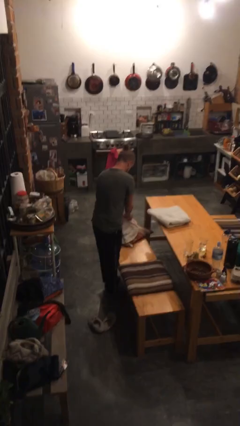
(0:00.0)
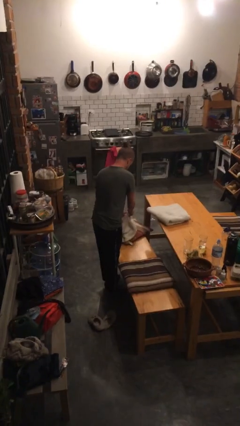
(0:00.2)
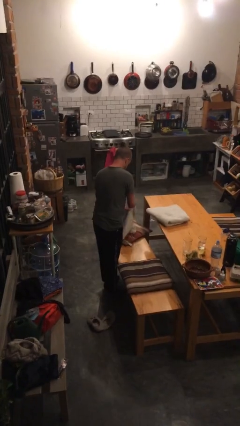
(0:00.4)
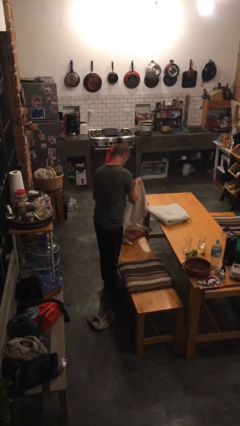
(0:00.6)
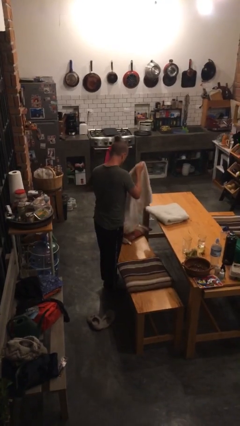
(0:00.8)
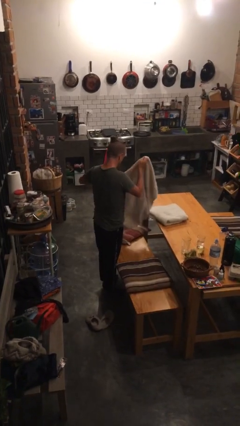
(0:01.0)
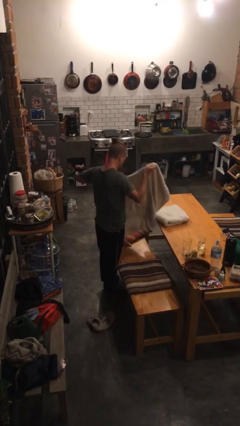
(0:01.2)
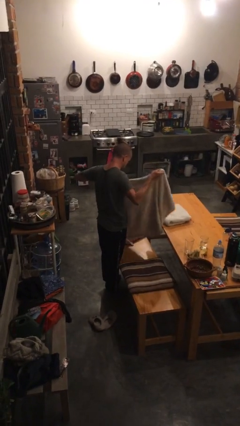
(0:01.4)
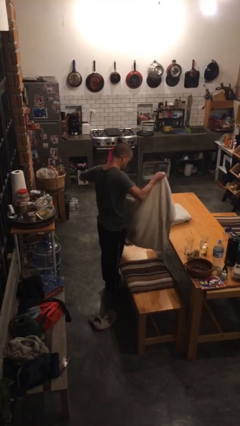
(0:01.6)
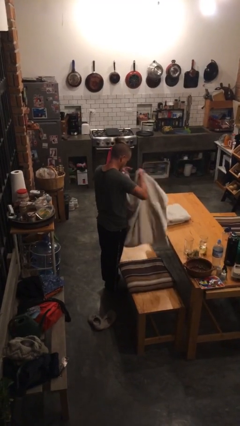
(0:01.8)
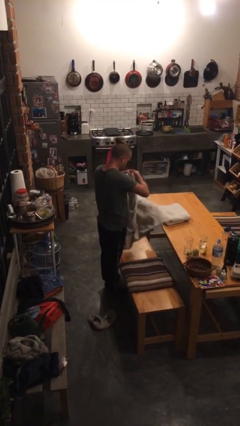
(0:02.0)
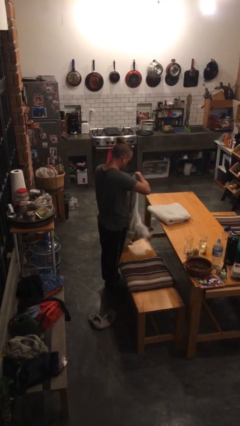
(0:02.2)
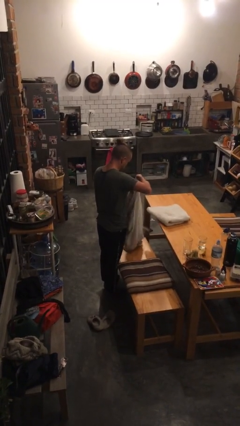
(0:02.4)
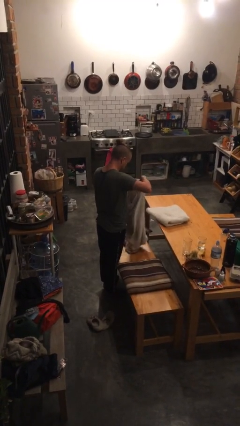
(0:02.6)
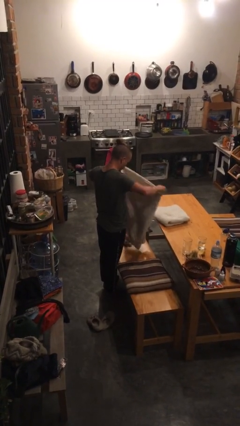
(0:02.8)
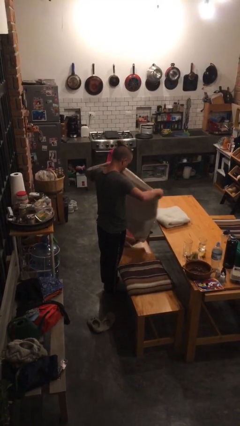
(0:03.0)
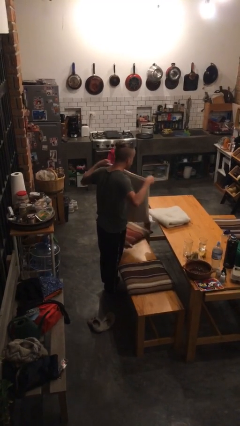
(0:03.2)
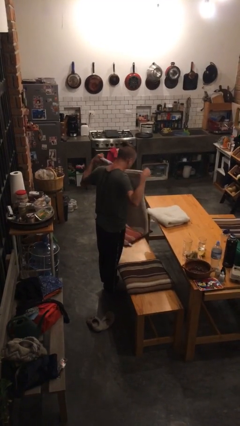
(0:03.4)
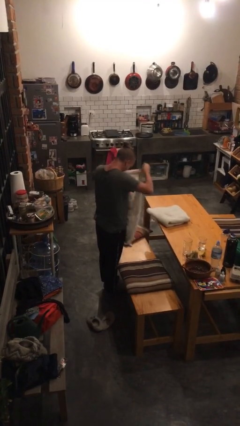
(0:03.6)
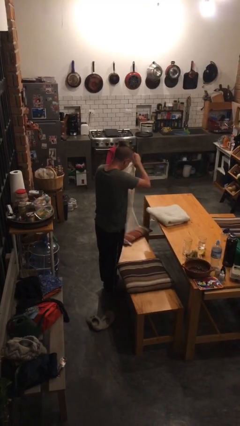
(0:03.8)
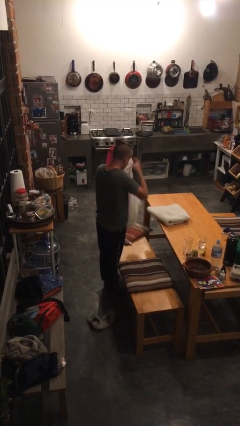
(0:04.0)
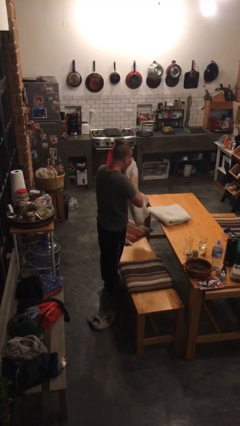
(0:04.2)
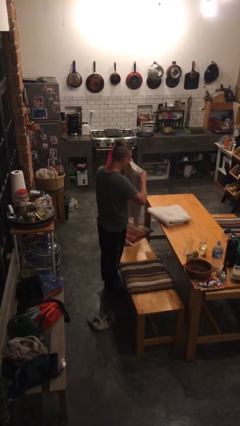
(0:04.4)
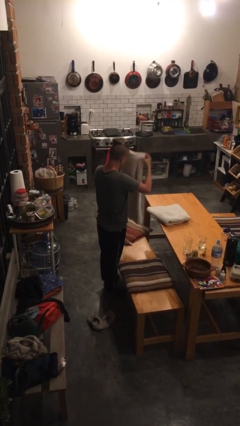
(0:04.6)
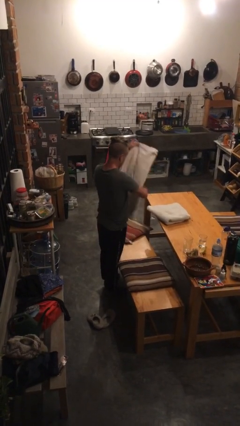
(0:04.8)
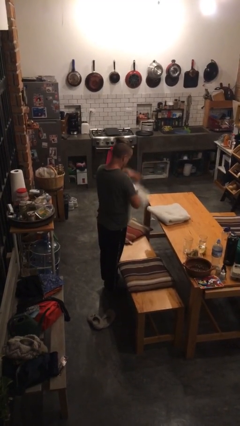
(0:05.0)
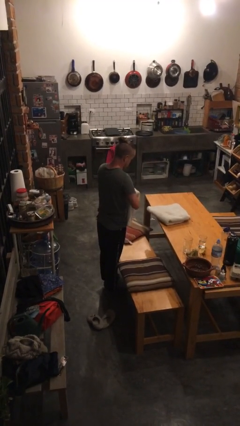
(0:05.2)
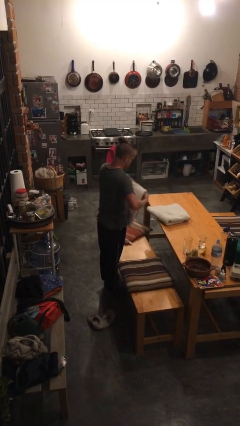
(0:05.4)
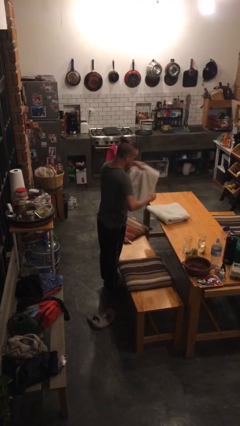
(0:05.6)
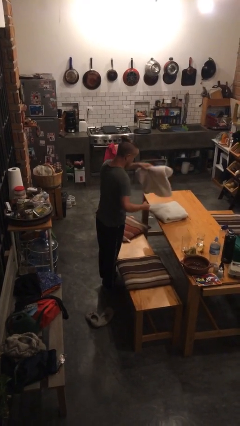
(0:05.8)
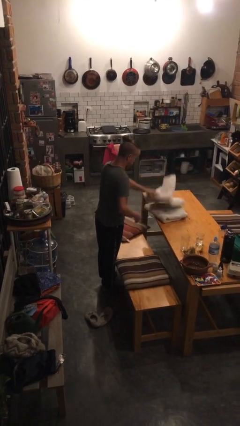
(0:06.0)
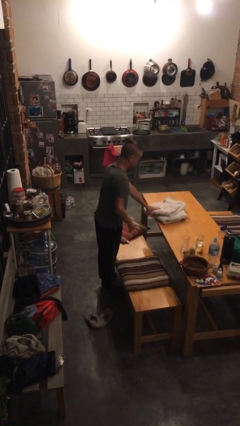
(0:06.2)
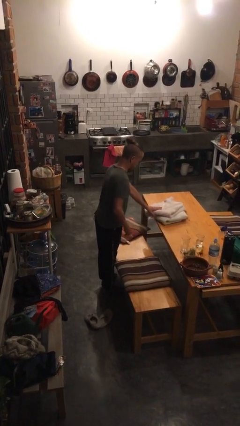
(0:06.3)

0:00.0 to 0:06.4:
person folds towel

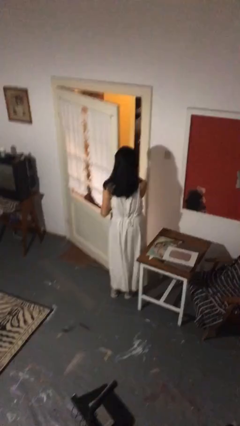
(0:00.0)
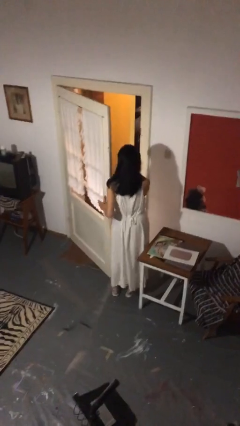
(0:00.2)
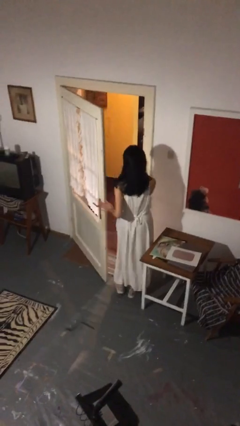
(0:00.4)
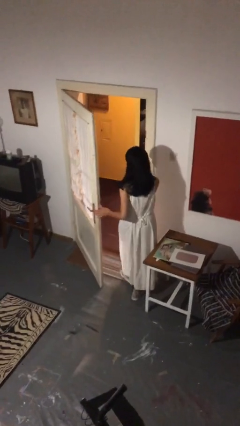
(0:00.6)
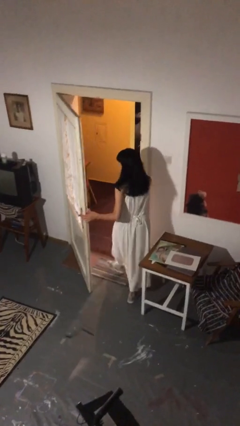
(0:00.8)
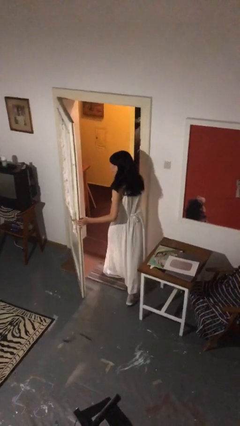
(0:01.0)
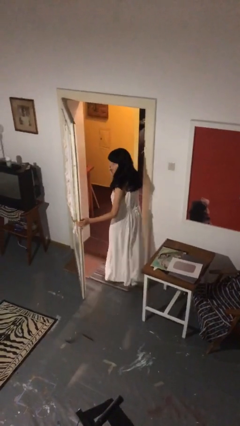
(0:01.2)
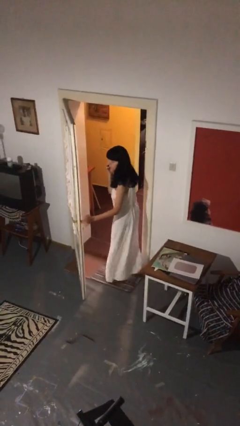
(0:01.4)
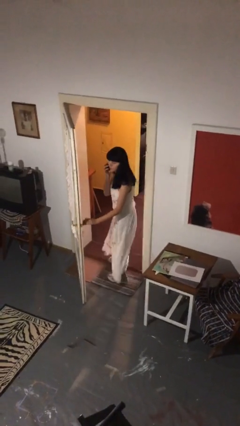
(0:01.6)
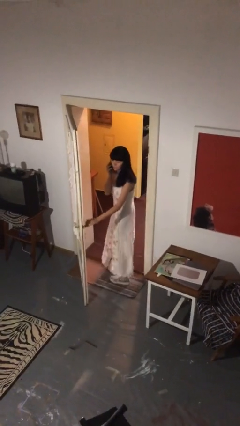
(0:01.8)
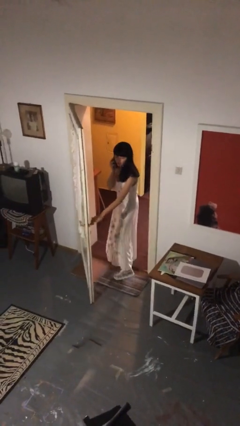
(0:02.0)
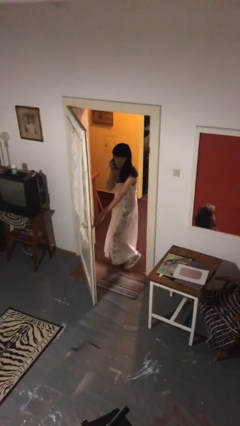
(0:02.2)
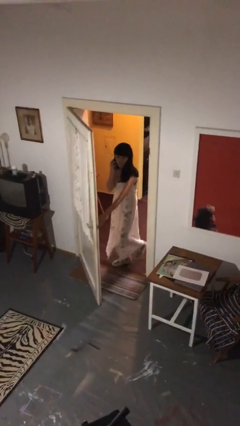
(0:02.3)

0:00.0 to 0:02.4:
person exits scene through structure

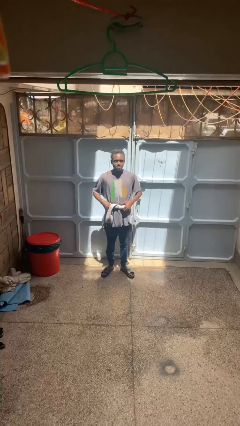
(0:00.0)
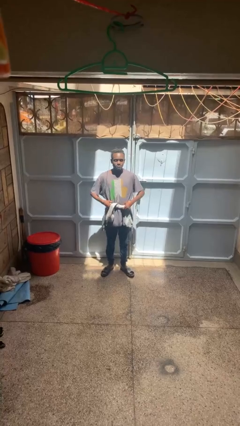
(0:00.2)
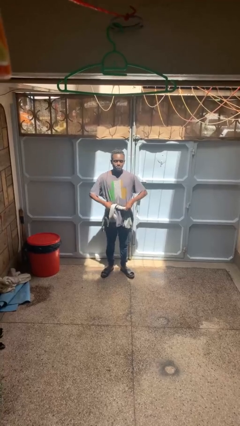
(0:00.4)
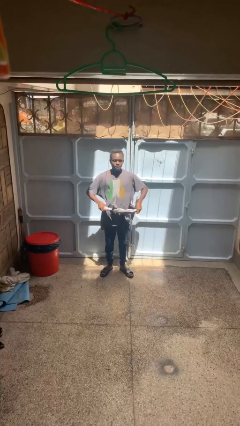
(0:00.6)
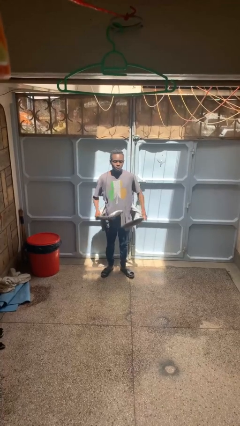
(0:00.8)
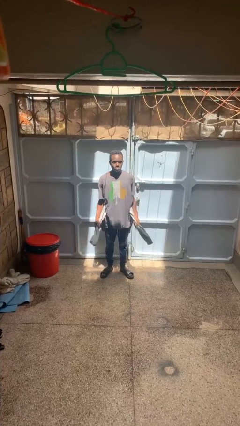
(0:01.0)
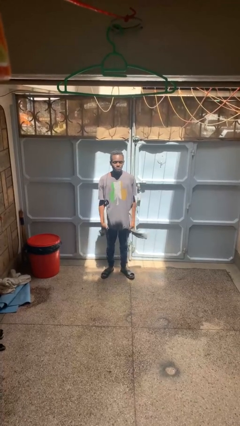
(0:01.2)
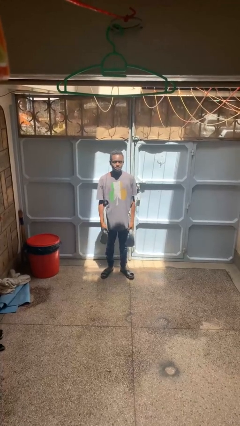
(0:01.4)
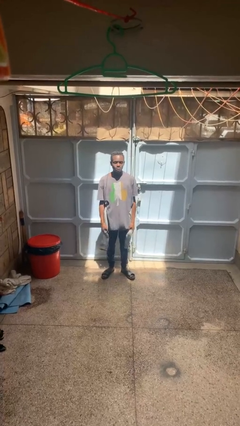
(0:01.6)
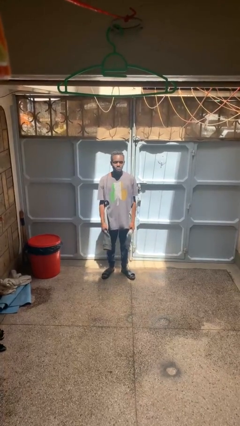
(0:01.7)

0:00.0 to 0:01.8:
person unties jacket around waist

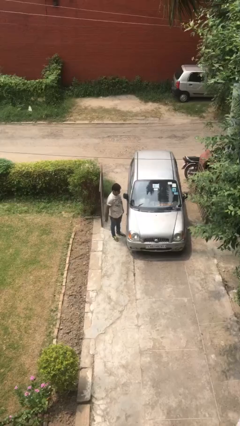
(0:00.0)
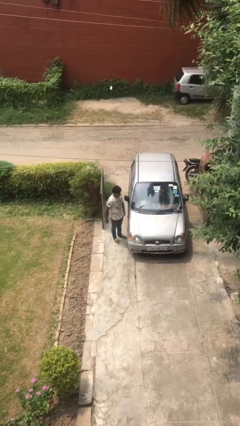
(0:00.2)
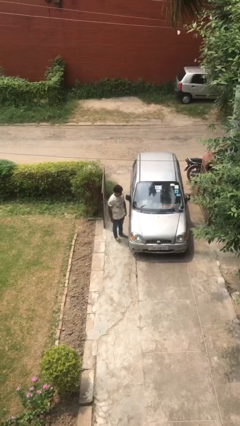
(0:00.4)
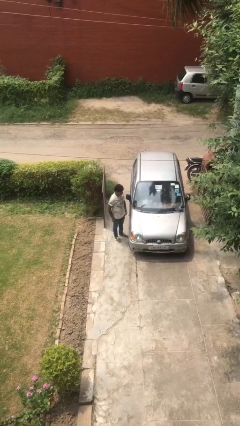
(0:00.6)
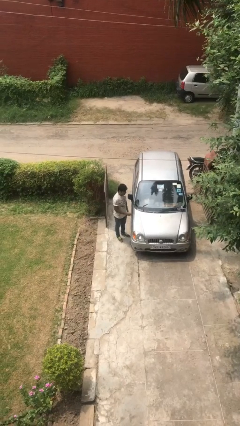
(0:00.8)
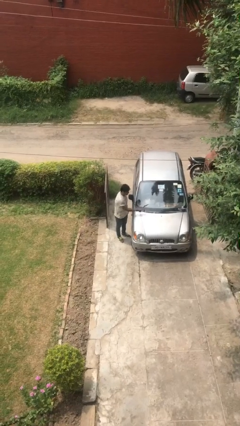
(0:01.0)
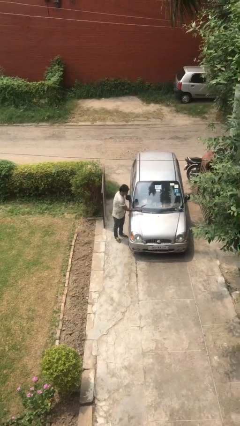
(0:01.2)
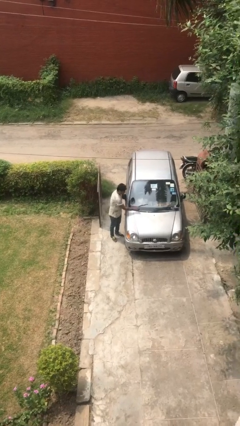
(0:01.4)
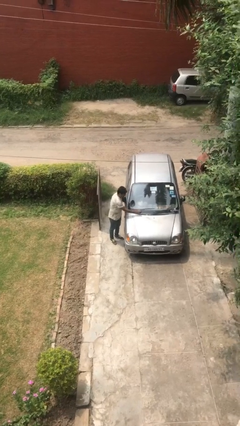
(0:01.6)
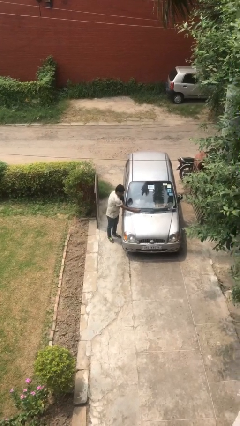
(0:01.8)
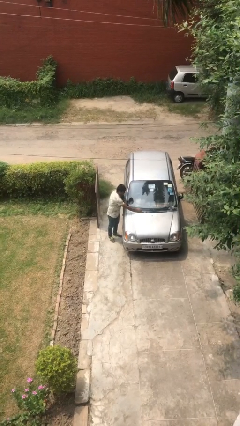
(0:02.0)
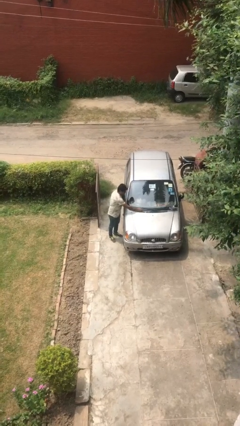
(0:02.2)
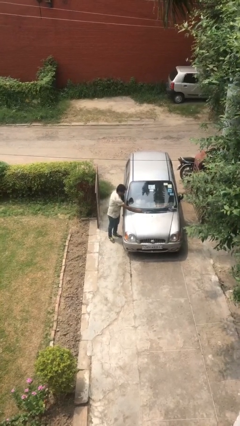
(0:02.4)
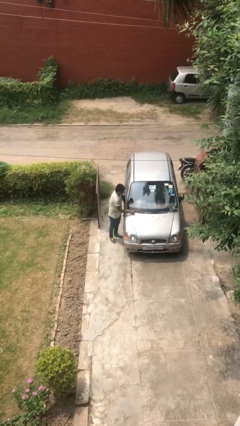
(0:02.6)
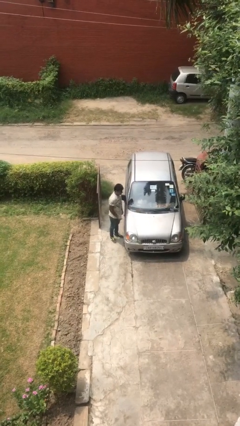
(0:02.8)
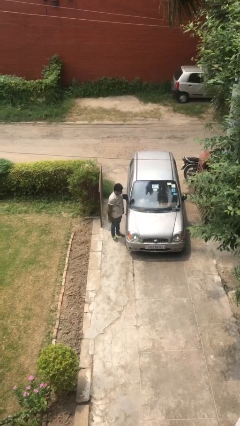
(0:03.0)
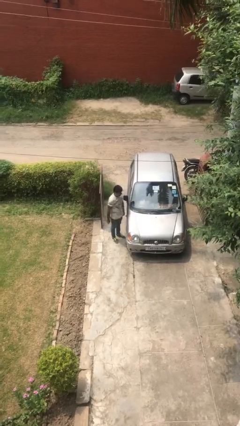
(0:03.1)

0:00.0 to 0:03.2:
person flips down car wipers

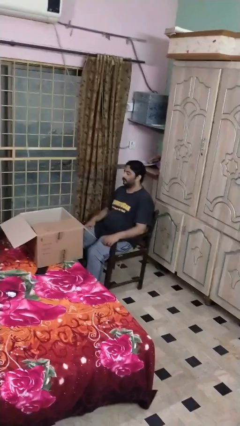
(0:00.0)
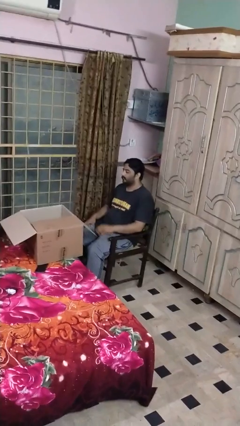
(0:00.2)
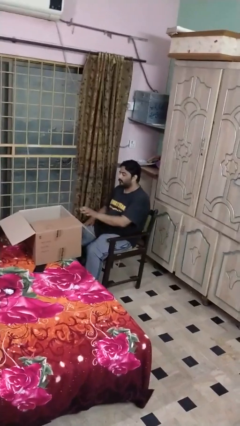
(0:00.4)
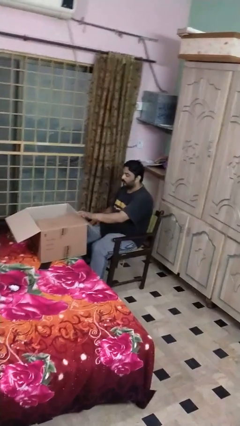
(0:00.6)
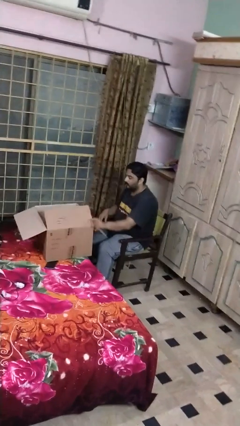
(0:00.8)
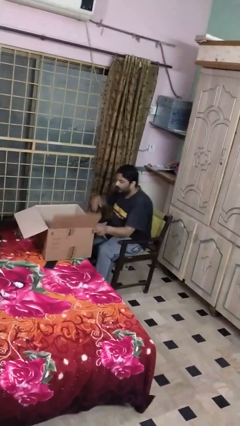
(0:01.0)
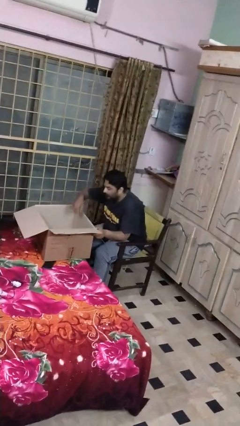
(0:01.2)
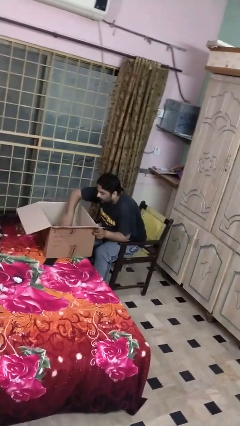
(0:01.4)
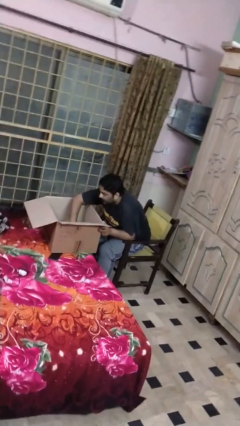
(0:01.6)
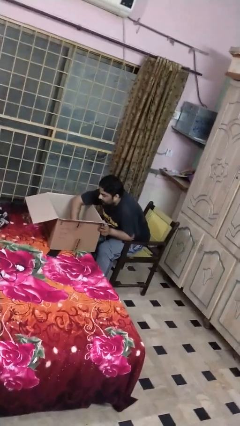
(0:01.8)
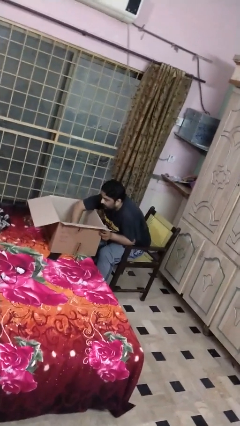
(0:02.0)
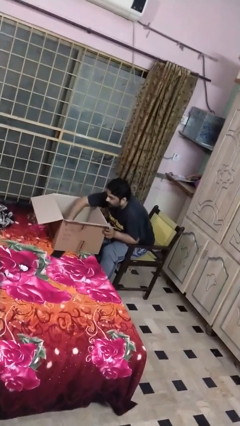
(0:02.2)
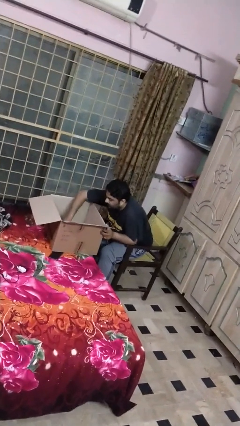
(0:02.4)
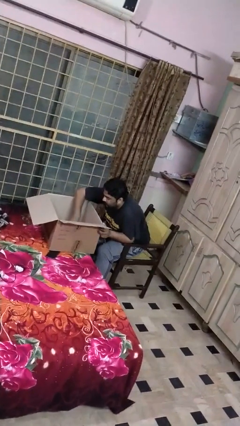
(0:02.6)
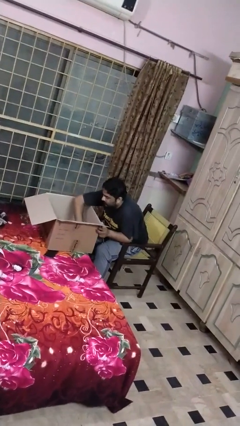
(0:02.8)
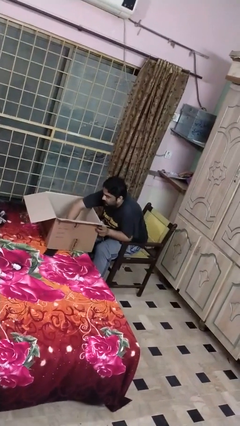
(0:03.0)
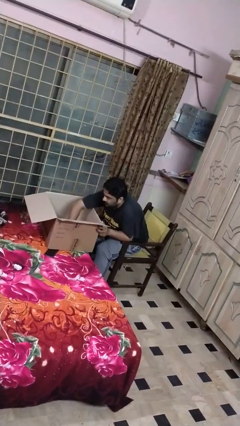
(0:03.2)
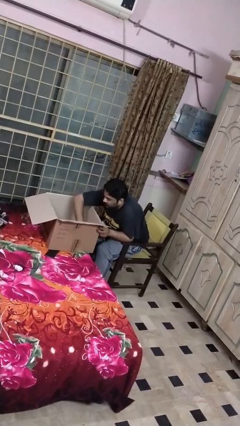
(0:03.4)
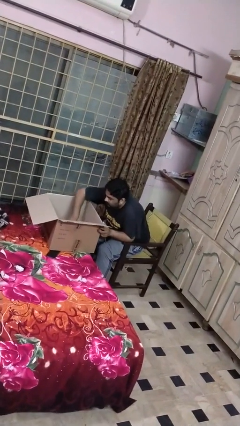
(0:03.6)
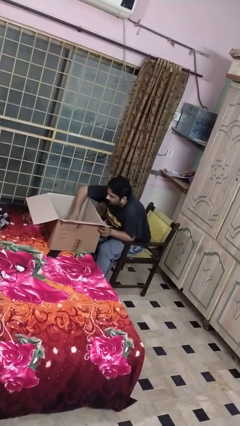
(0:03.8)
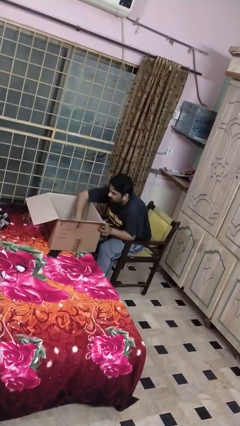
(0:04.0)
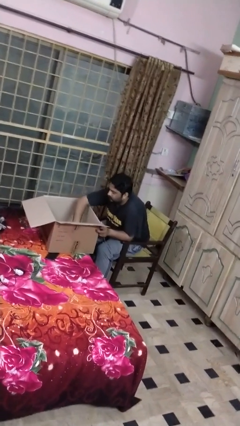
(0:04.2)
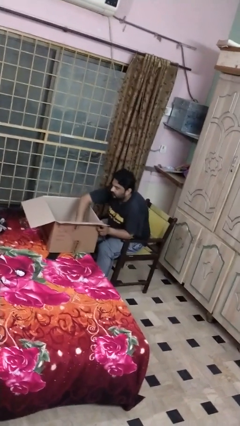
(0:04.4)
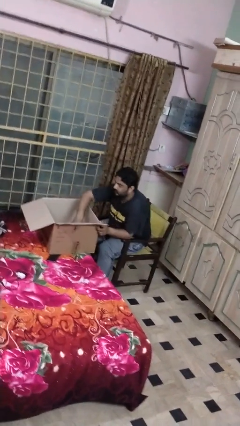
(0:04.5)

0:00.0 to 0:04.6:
person searches in box
